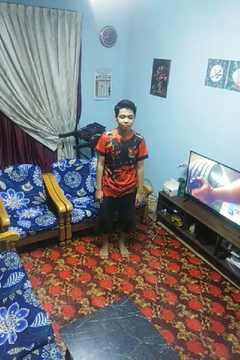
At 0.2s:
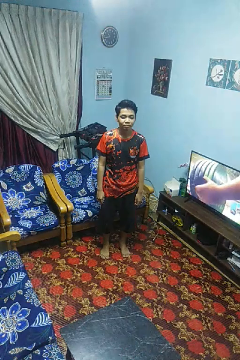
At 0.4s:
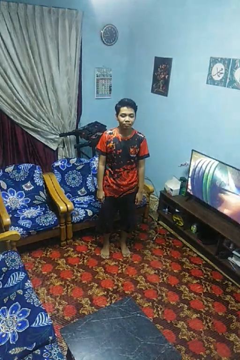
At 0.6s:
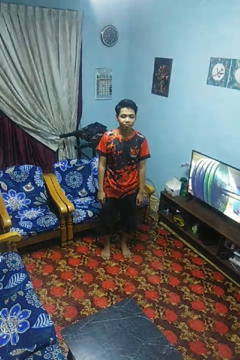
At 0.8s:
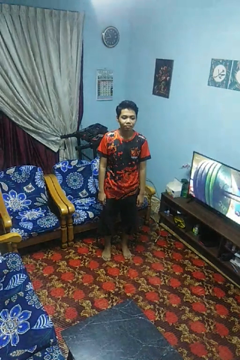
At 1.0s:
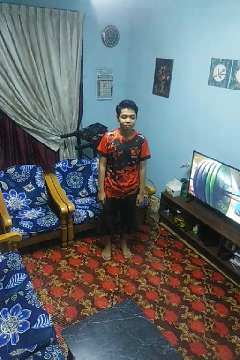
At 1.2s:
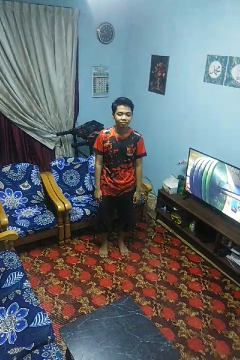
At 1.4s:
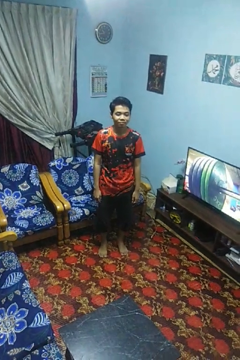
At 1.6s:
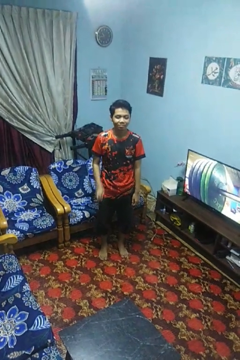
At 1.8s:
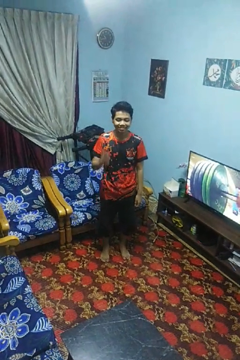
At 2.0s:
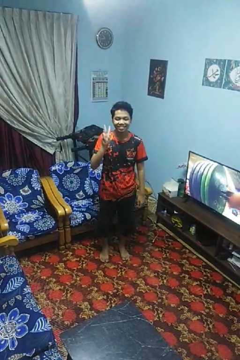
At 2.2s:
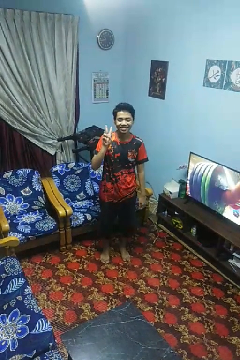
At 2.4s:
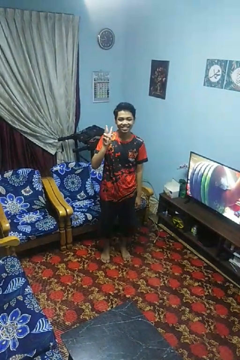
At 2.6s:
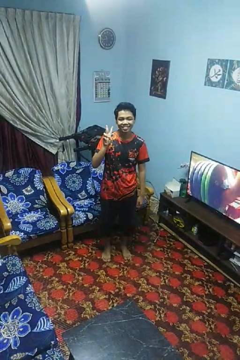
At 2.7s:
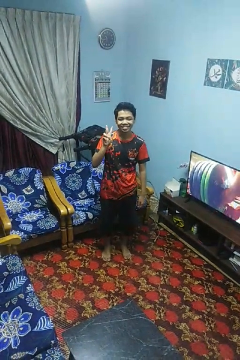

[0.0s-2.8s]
person gestures peace

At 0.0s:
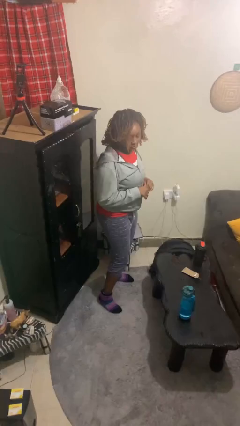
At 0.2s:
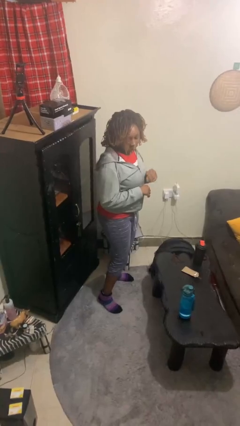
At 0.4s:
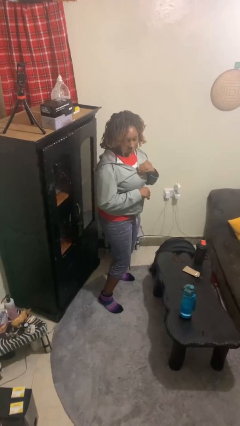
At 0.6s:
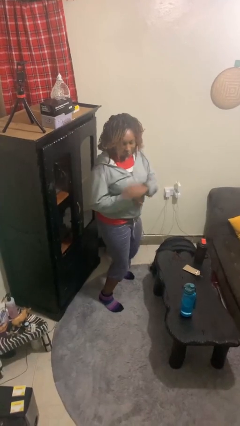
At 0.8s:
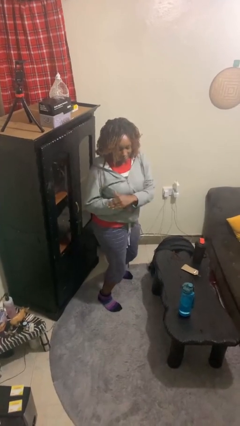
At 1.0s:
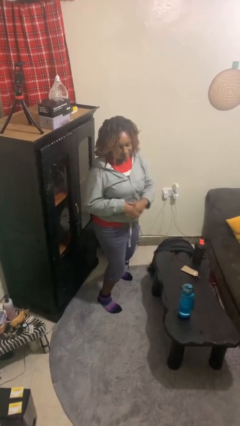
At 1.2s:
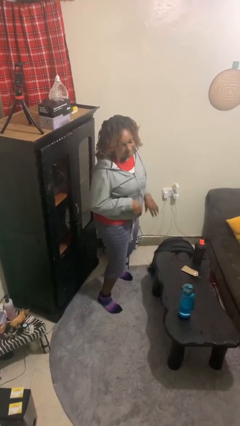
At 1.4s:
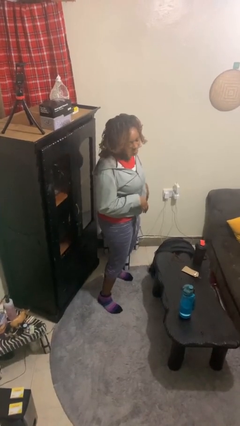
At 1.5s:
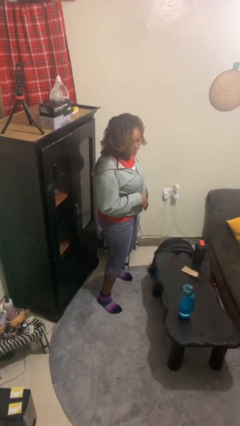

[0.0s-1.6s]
person karate chop

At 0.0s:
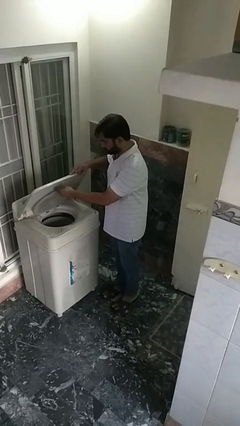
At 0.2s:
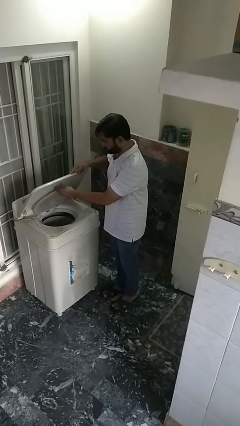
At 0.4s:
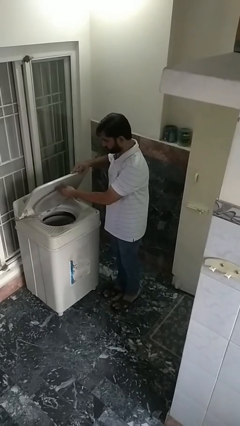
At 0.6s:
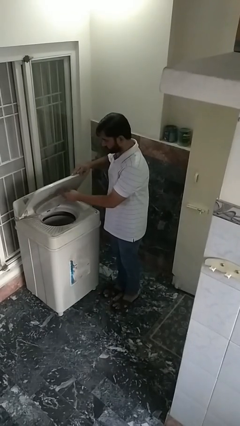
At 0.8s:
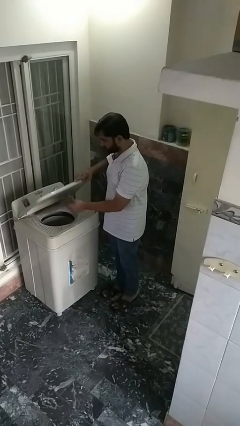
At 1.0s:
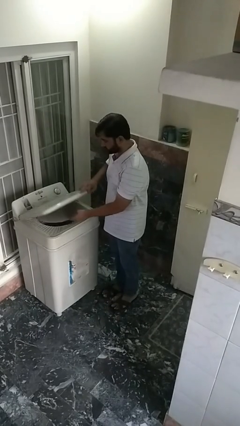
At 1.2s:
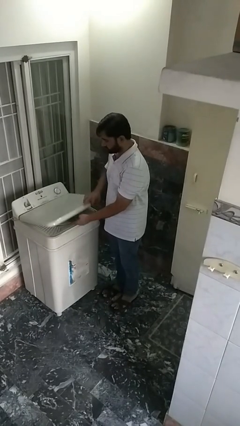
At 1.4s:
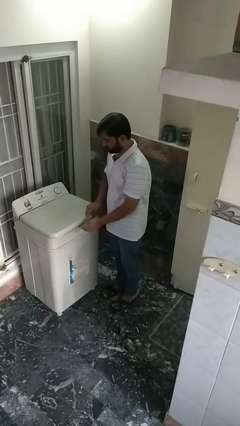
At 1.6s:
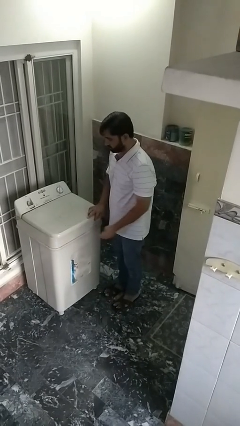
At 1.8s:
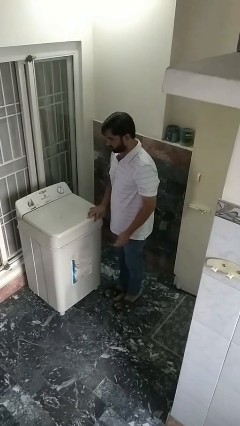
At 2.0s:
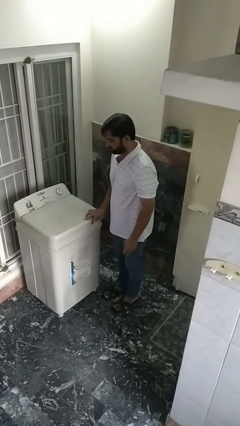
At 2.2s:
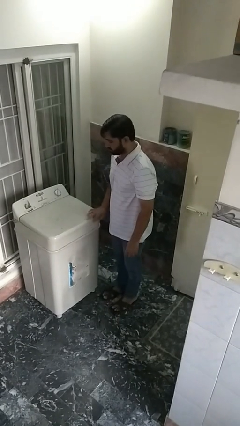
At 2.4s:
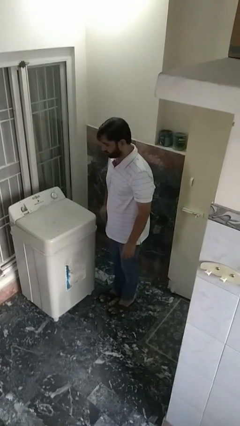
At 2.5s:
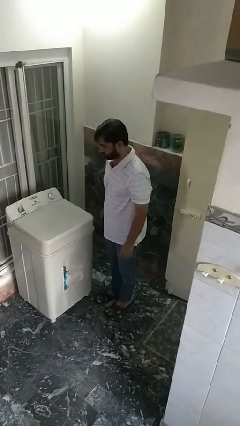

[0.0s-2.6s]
person closes clothes washer

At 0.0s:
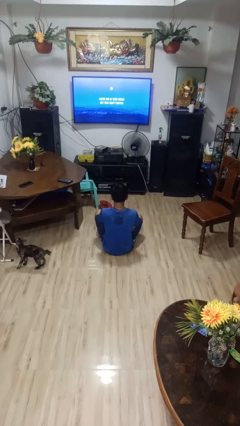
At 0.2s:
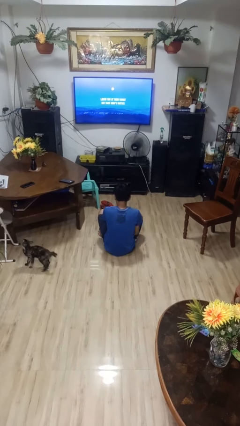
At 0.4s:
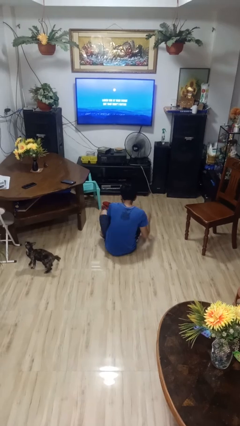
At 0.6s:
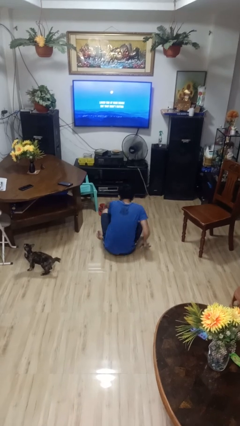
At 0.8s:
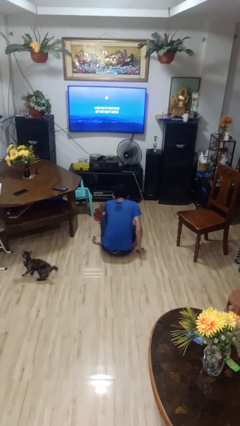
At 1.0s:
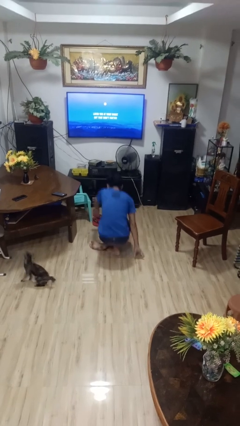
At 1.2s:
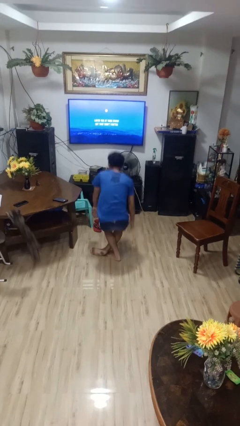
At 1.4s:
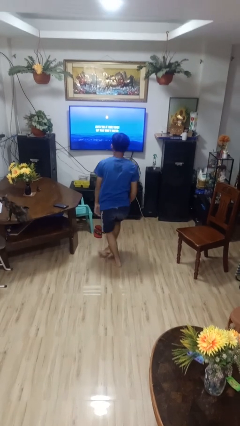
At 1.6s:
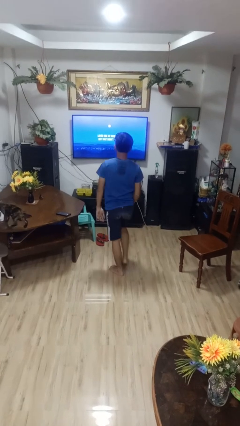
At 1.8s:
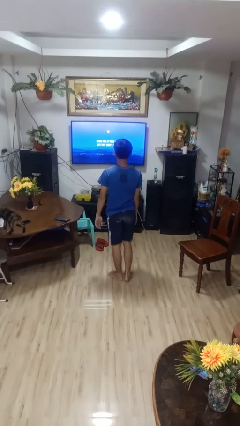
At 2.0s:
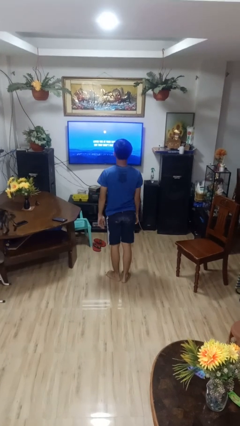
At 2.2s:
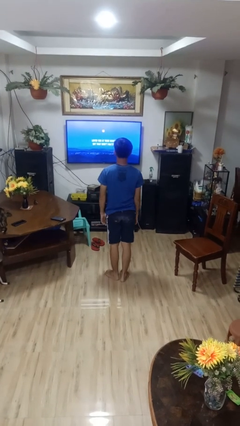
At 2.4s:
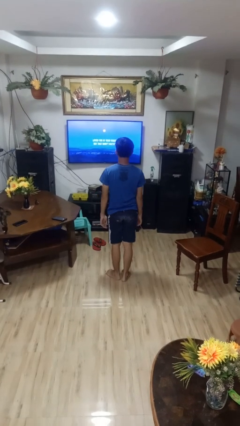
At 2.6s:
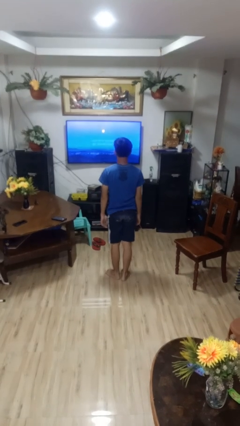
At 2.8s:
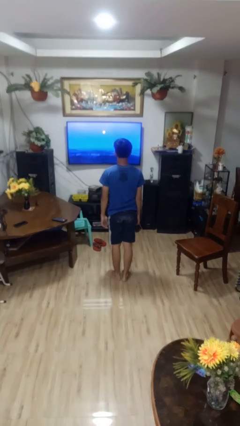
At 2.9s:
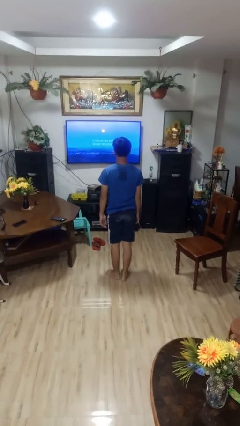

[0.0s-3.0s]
person stands up from floor

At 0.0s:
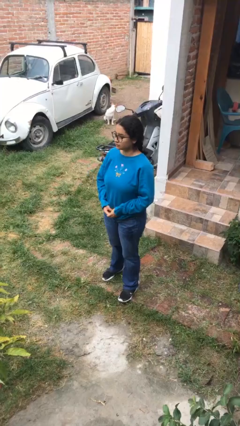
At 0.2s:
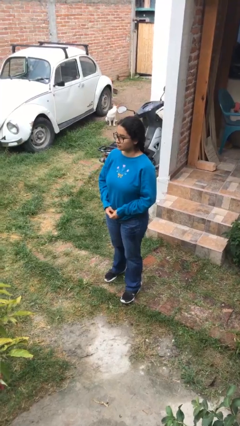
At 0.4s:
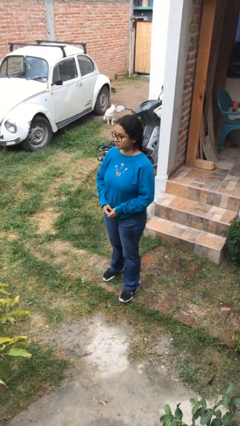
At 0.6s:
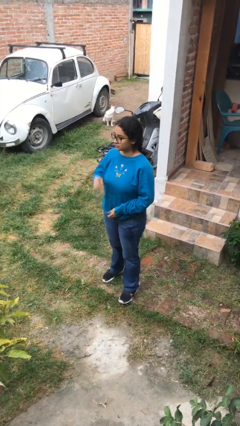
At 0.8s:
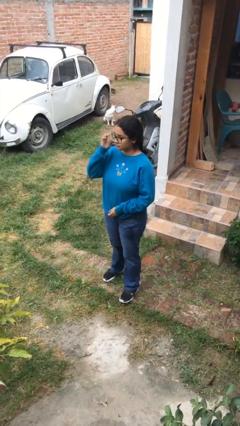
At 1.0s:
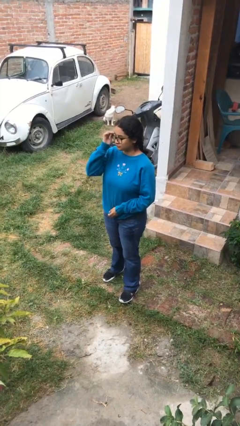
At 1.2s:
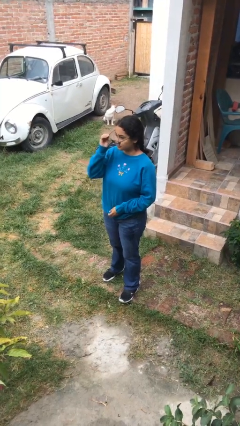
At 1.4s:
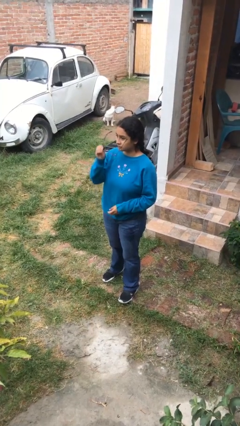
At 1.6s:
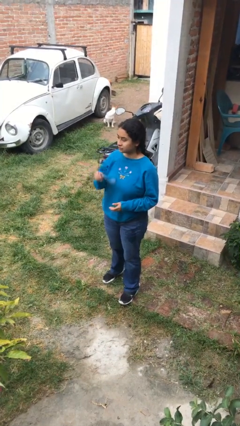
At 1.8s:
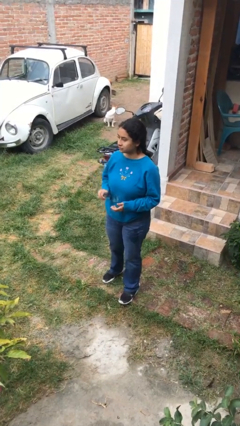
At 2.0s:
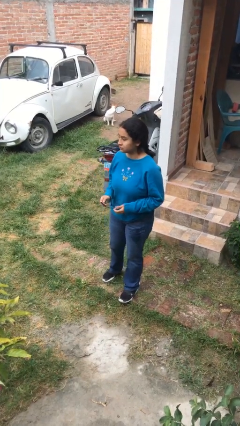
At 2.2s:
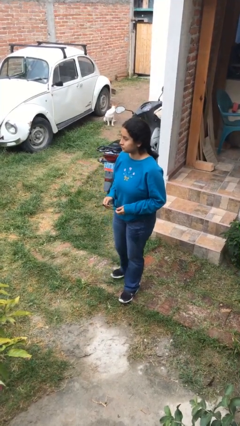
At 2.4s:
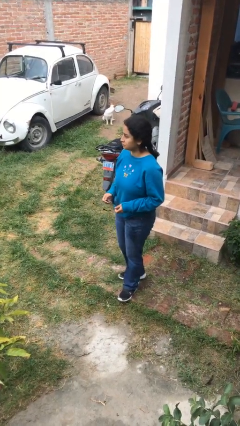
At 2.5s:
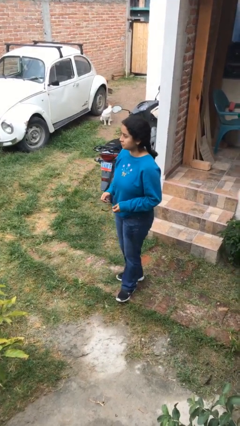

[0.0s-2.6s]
person takes off glasses

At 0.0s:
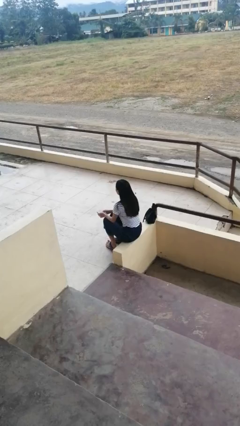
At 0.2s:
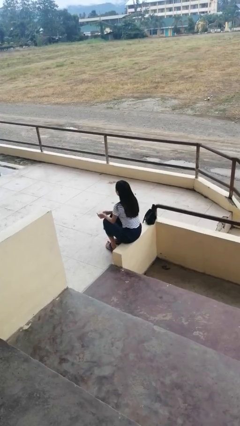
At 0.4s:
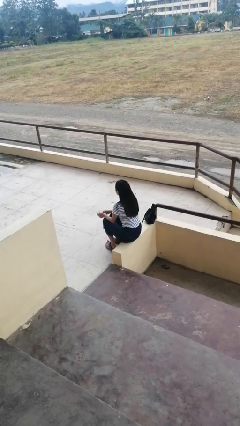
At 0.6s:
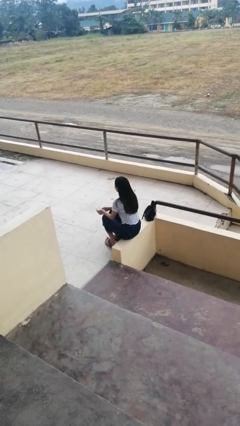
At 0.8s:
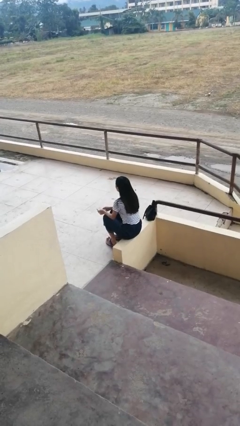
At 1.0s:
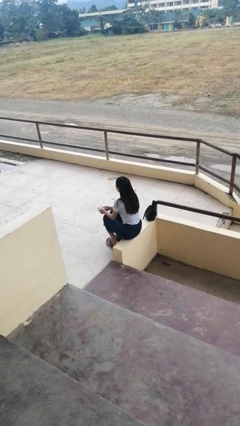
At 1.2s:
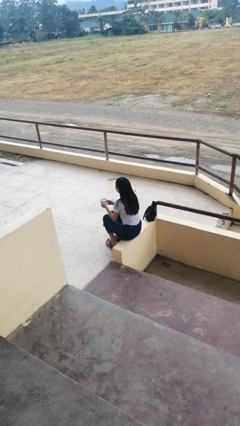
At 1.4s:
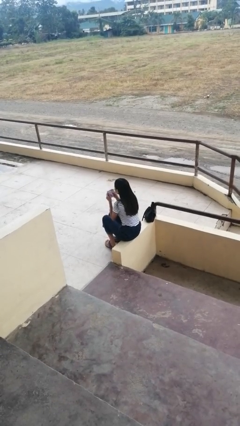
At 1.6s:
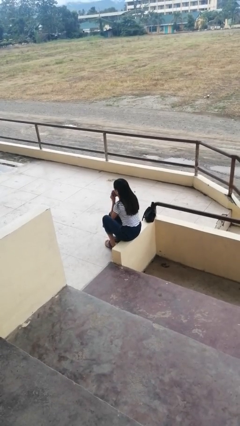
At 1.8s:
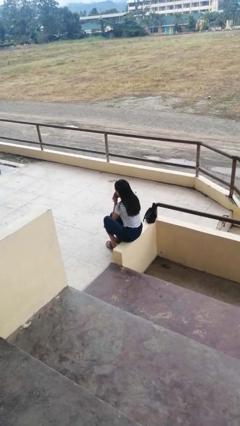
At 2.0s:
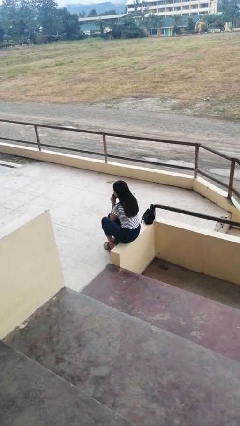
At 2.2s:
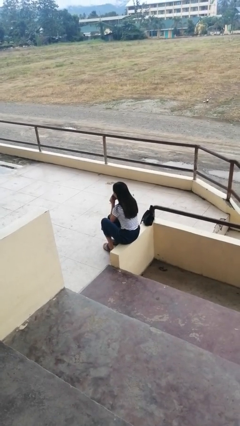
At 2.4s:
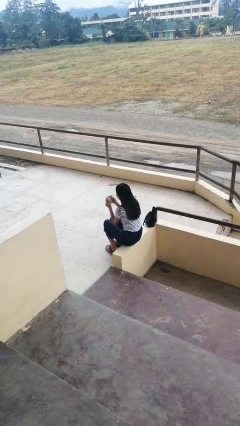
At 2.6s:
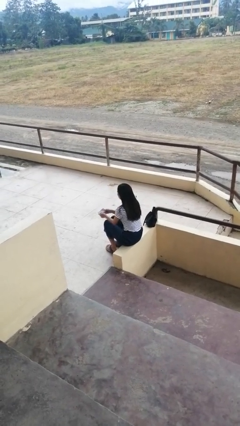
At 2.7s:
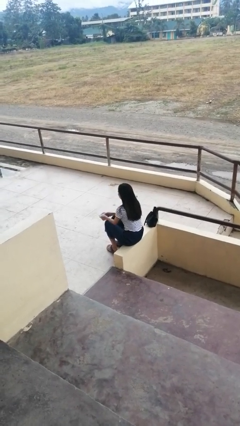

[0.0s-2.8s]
person blows nose

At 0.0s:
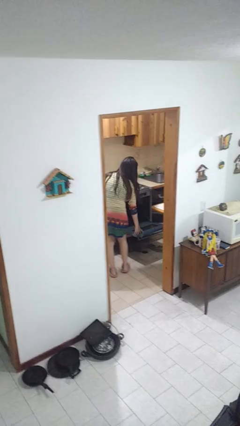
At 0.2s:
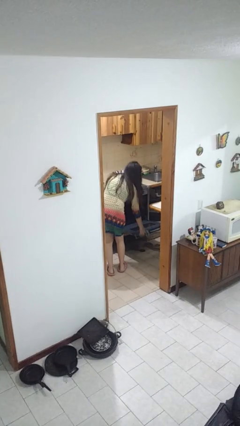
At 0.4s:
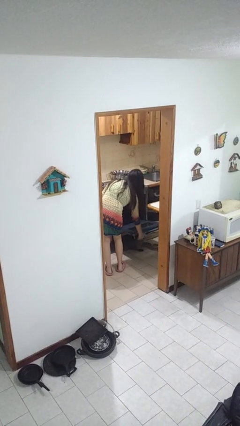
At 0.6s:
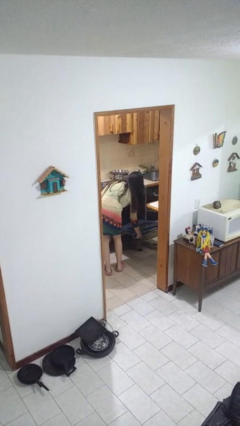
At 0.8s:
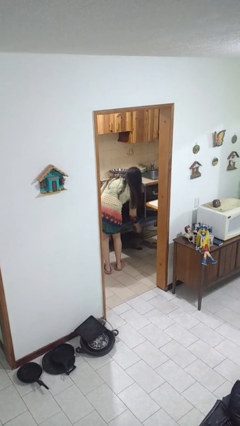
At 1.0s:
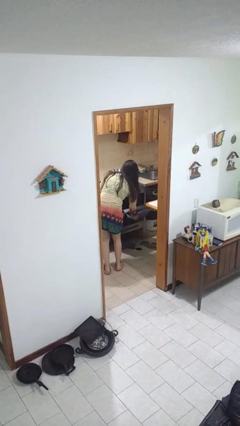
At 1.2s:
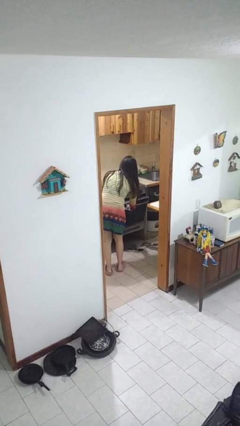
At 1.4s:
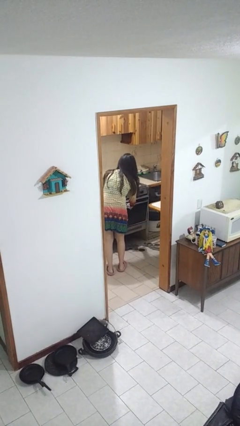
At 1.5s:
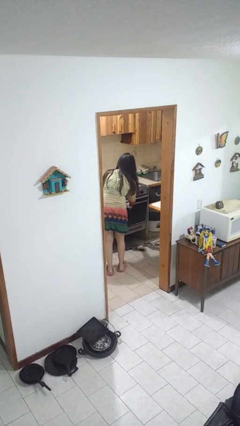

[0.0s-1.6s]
person closes oven door

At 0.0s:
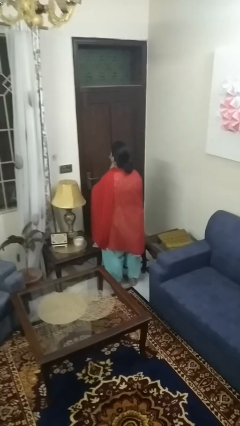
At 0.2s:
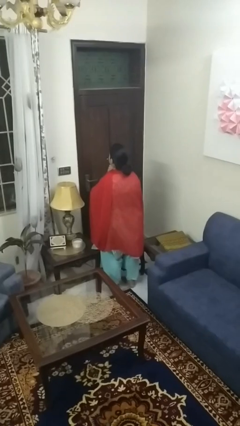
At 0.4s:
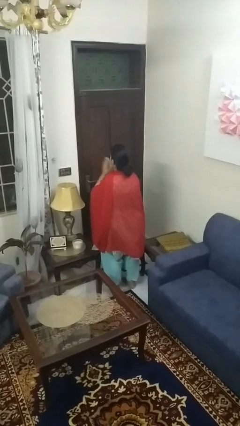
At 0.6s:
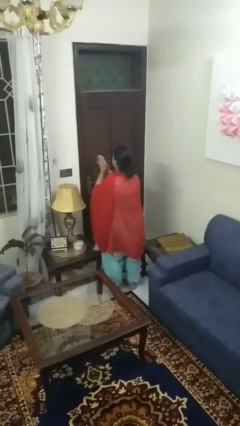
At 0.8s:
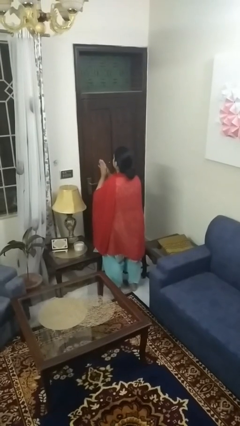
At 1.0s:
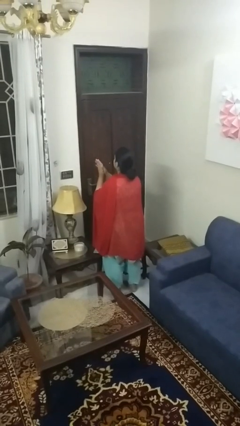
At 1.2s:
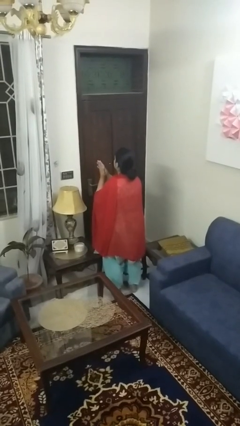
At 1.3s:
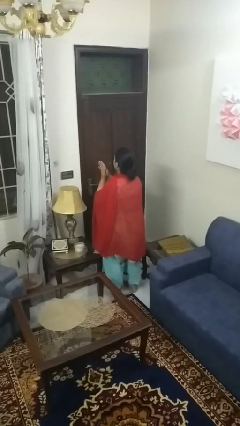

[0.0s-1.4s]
person swats bug
